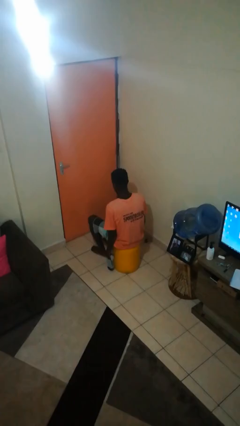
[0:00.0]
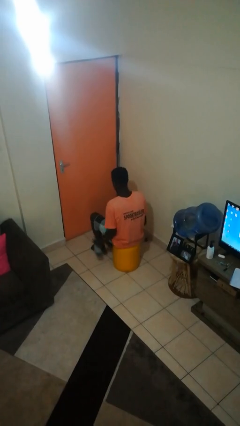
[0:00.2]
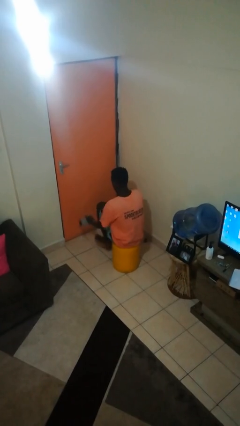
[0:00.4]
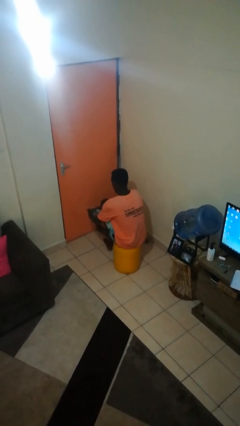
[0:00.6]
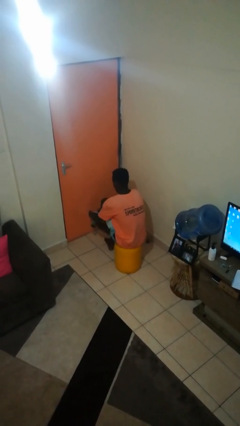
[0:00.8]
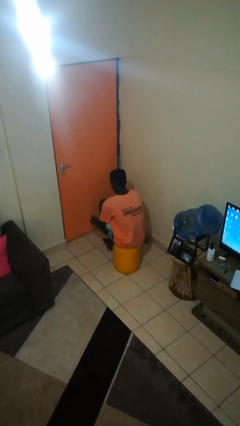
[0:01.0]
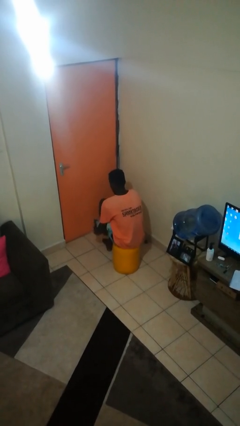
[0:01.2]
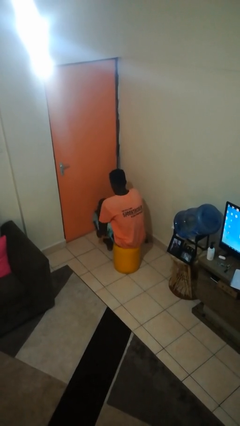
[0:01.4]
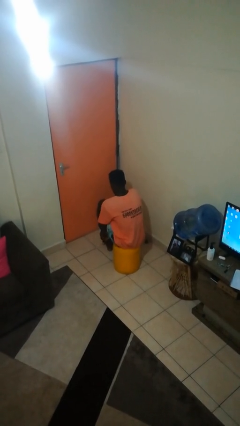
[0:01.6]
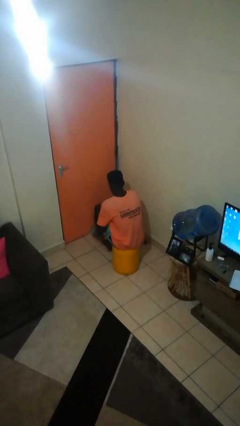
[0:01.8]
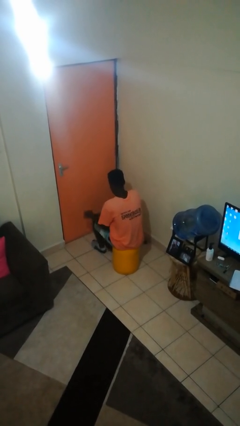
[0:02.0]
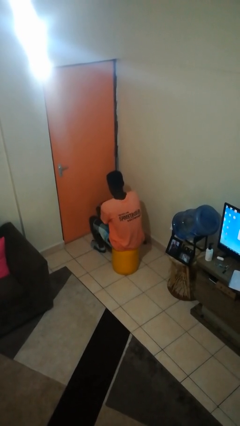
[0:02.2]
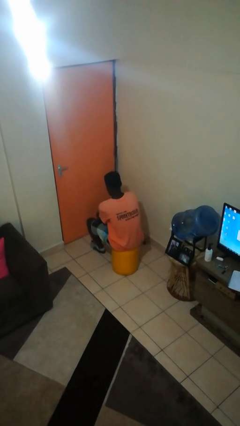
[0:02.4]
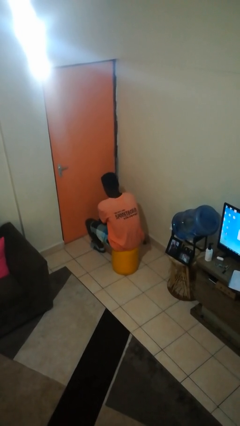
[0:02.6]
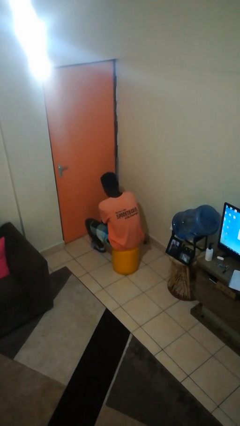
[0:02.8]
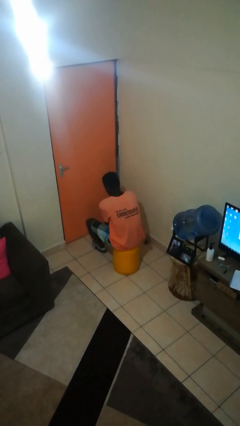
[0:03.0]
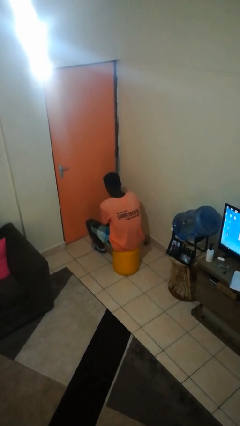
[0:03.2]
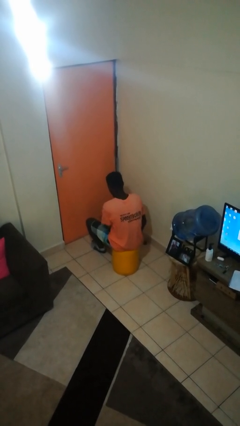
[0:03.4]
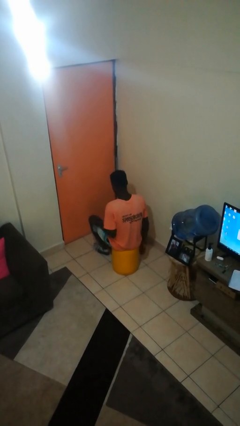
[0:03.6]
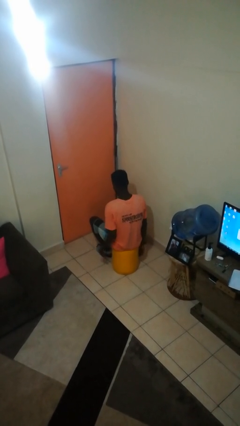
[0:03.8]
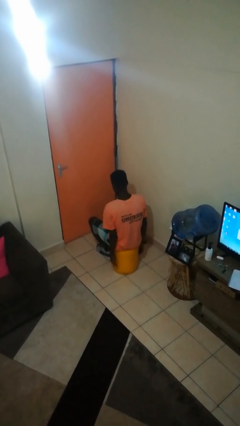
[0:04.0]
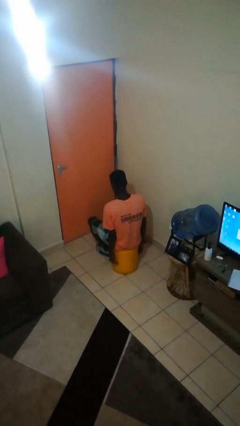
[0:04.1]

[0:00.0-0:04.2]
person puts on socks

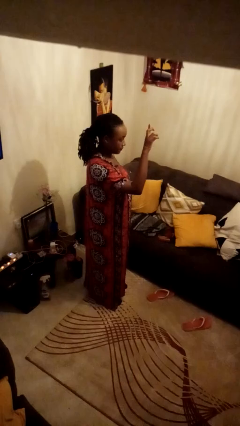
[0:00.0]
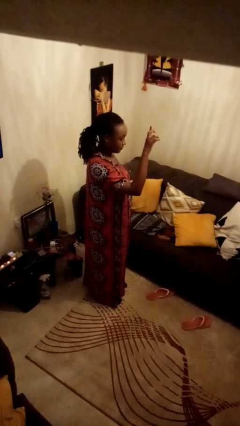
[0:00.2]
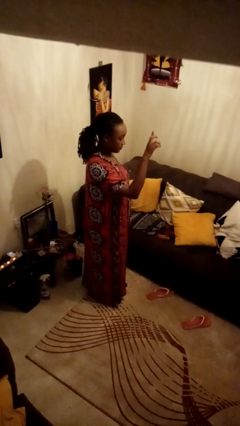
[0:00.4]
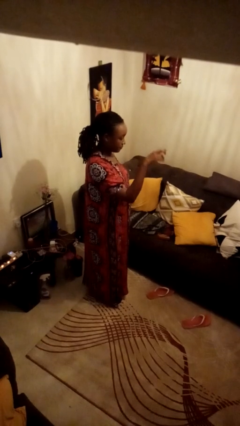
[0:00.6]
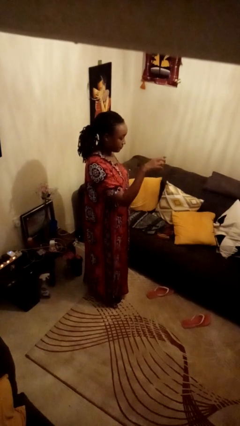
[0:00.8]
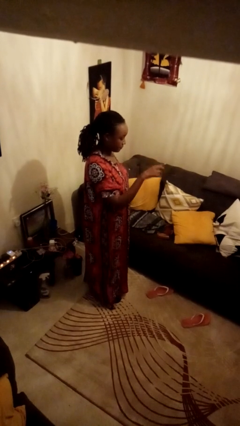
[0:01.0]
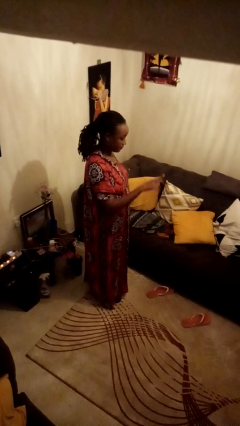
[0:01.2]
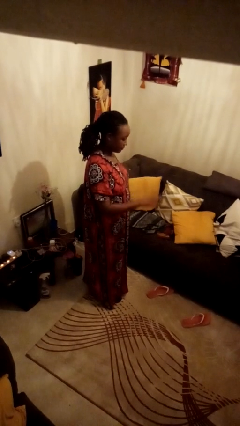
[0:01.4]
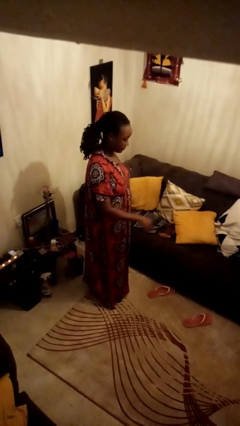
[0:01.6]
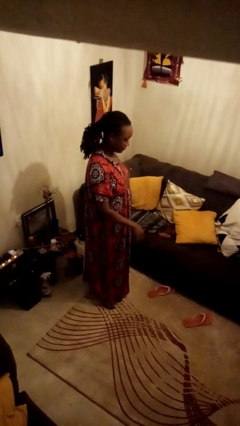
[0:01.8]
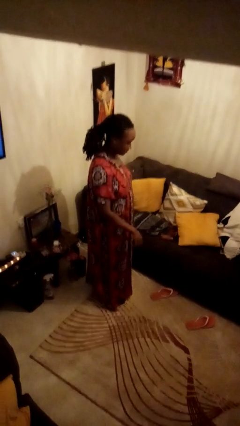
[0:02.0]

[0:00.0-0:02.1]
person gestures swipe down

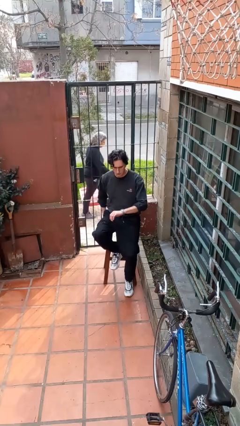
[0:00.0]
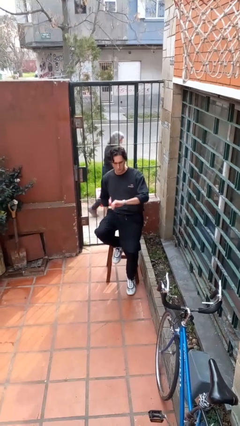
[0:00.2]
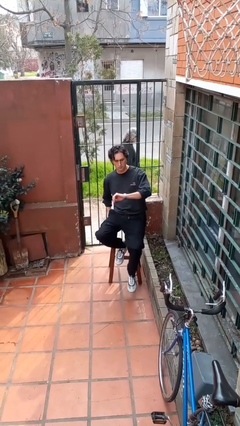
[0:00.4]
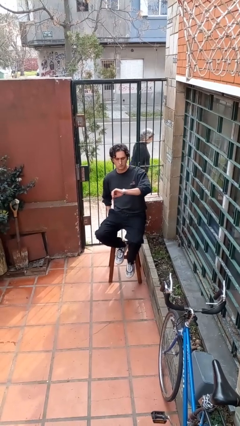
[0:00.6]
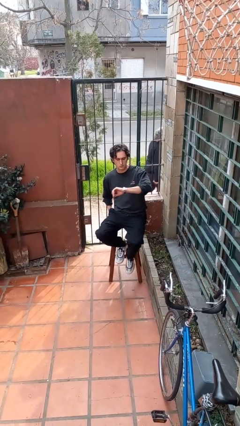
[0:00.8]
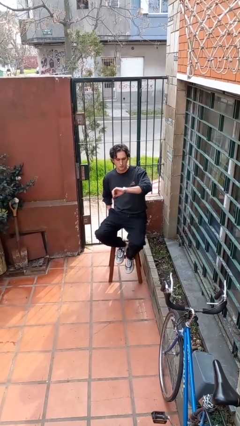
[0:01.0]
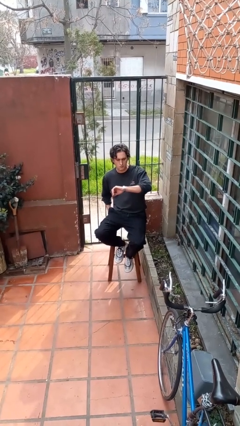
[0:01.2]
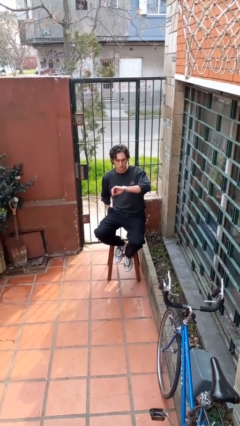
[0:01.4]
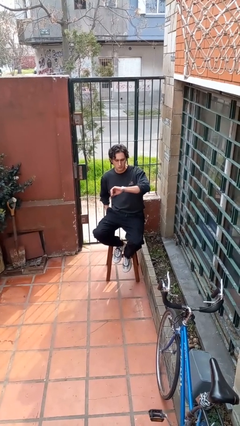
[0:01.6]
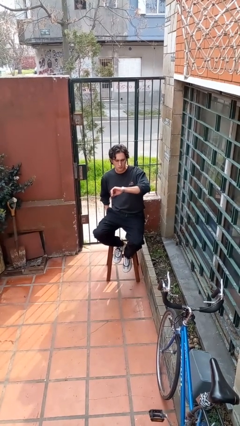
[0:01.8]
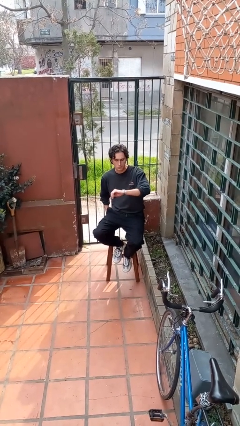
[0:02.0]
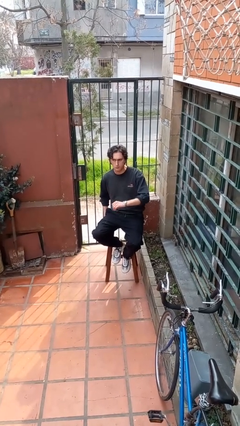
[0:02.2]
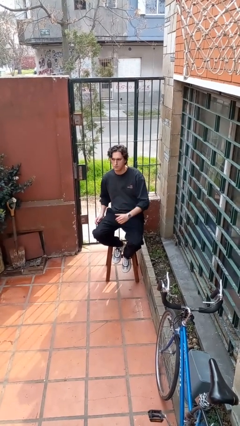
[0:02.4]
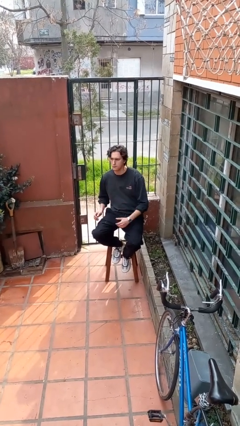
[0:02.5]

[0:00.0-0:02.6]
person looks at wristwatch

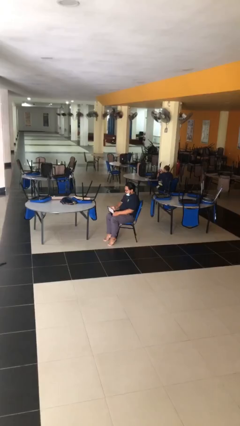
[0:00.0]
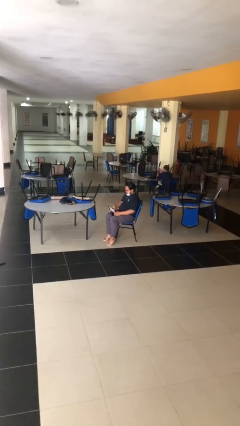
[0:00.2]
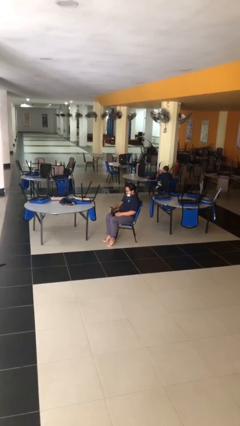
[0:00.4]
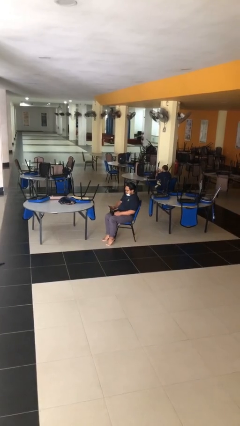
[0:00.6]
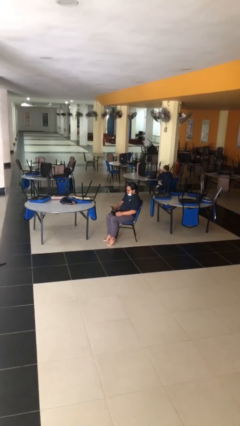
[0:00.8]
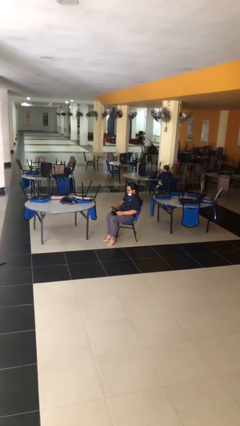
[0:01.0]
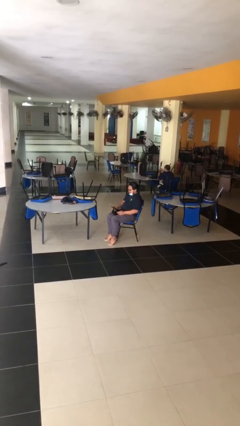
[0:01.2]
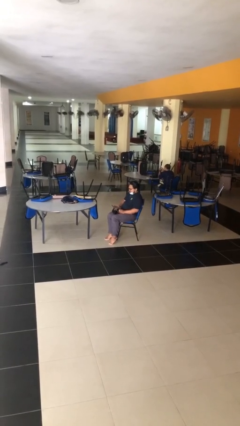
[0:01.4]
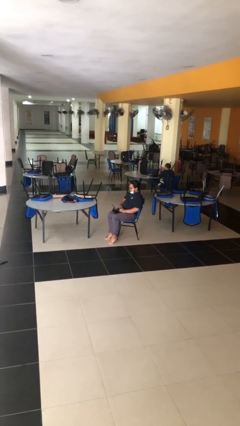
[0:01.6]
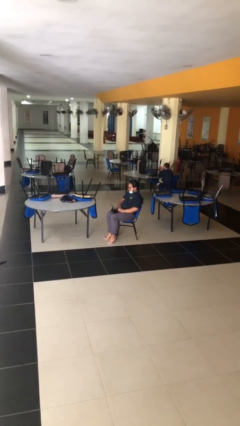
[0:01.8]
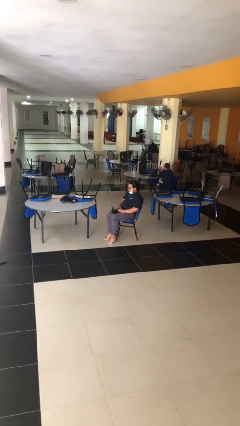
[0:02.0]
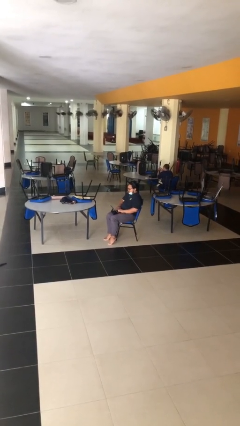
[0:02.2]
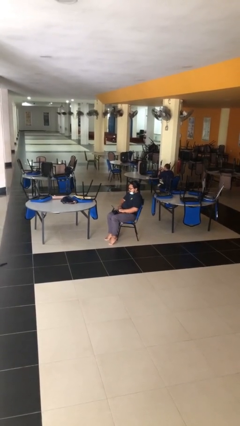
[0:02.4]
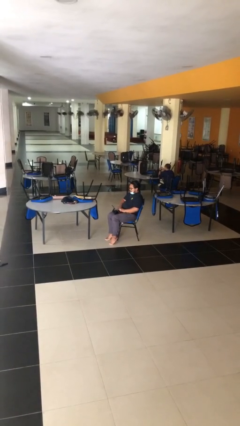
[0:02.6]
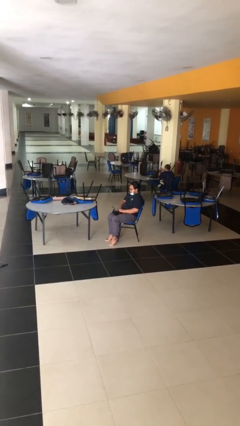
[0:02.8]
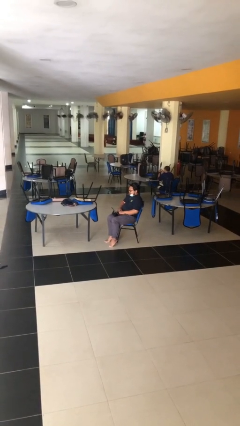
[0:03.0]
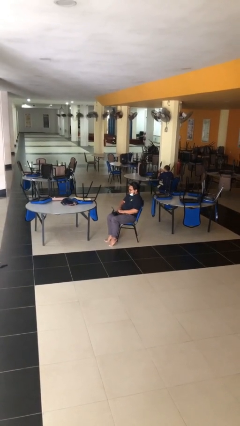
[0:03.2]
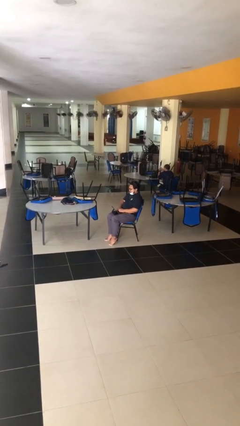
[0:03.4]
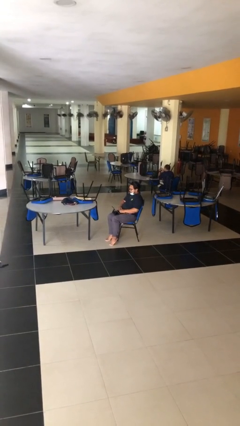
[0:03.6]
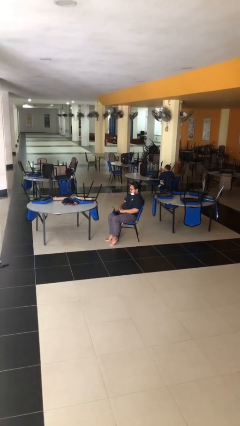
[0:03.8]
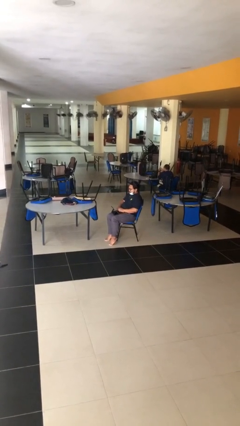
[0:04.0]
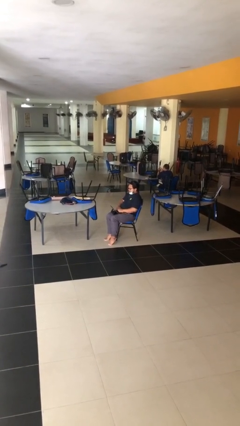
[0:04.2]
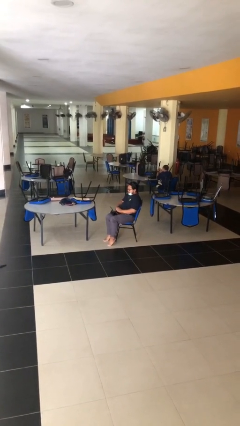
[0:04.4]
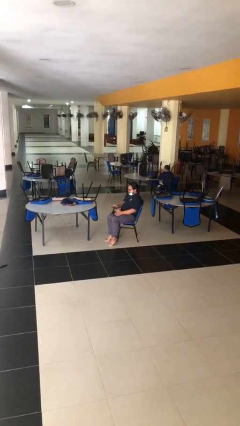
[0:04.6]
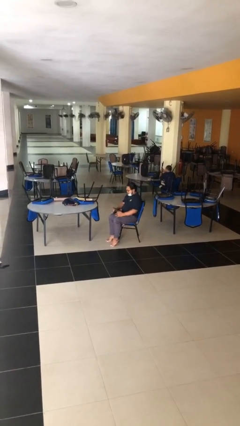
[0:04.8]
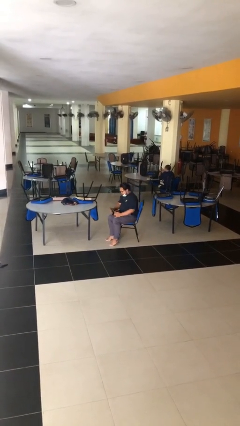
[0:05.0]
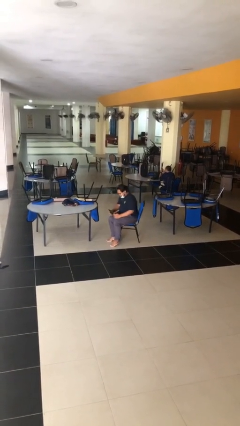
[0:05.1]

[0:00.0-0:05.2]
person interacts with laptop

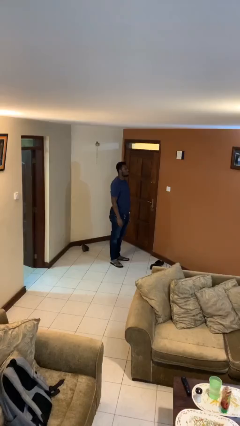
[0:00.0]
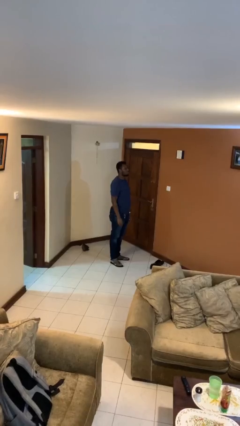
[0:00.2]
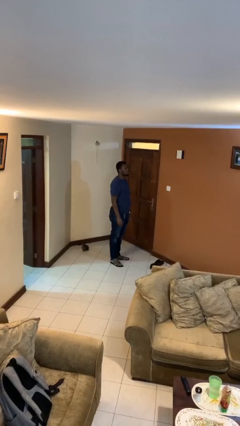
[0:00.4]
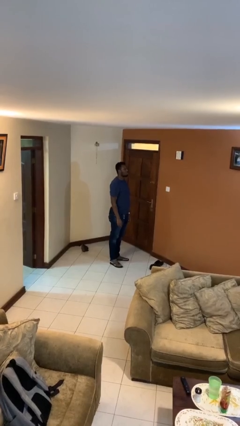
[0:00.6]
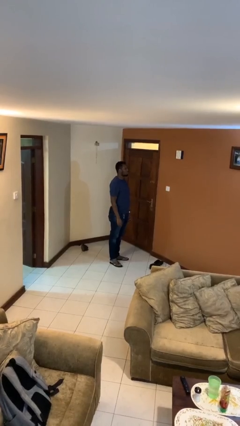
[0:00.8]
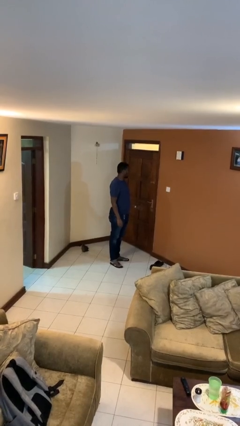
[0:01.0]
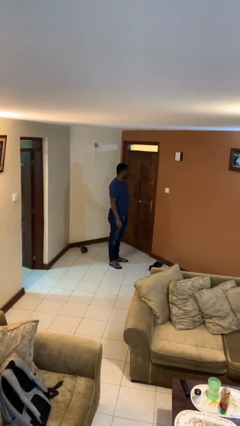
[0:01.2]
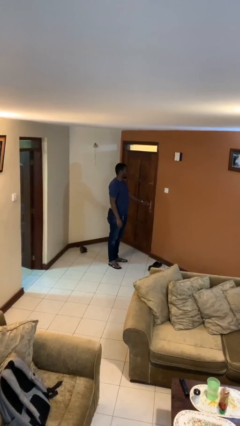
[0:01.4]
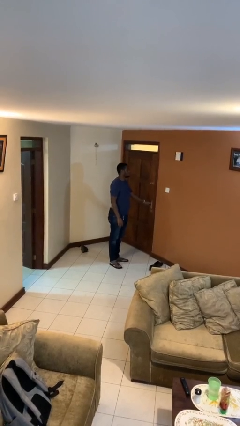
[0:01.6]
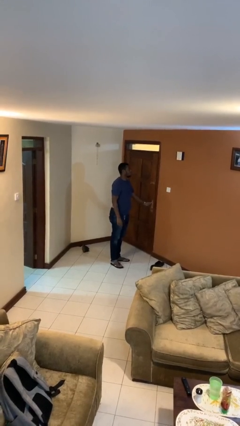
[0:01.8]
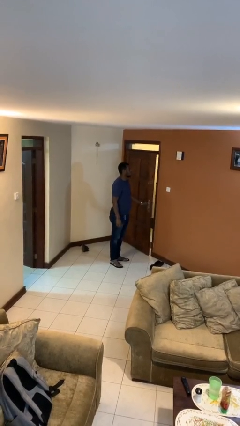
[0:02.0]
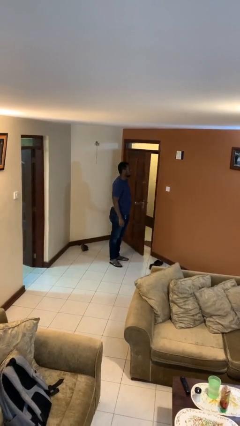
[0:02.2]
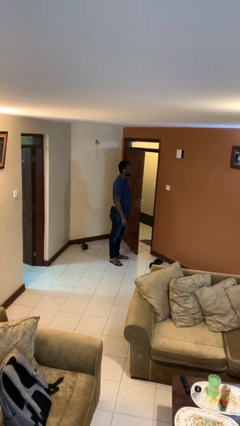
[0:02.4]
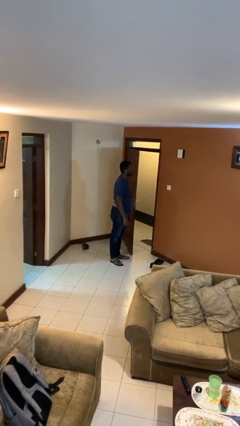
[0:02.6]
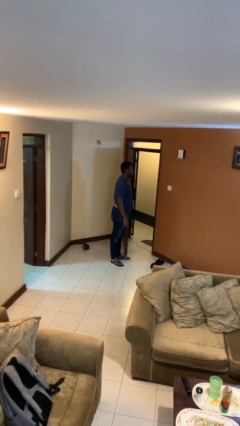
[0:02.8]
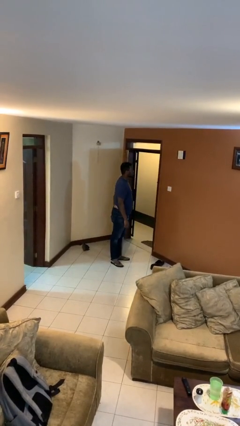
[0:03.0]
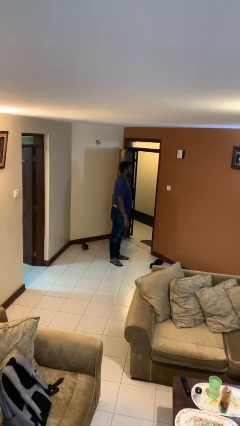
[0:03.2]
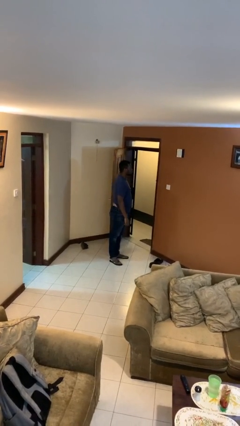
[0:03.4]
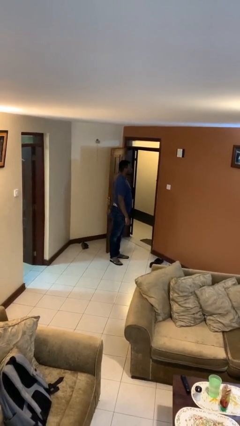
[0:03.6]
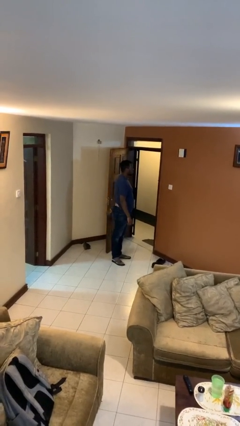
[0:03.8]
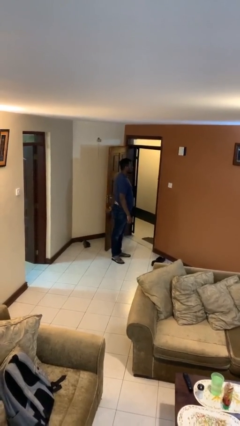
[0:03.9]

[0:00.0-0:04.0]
person opens facility door
